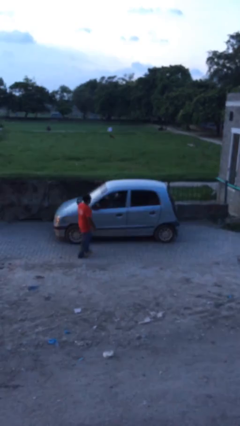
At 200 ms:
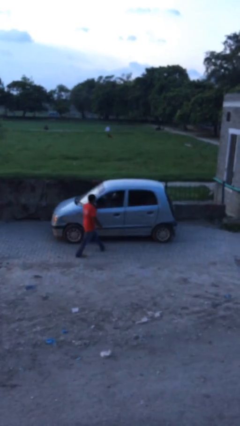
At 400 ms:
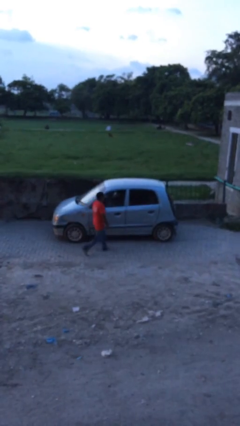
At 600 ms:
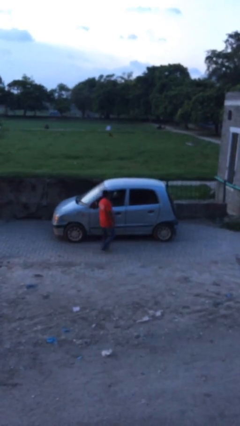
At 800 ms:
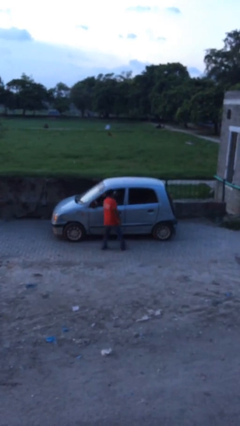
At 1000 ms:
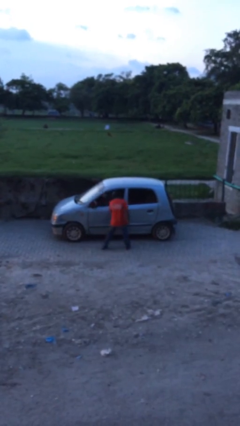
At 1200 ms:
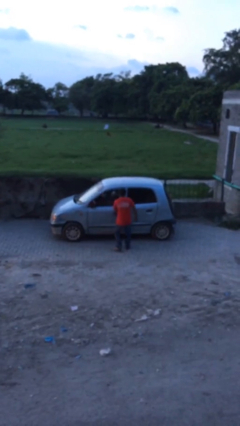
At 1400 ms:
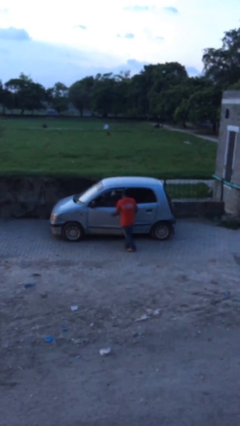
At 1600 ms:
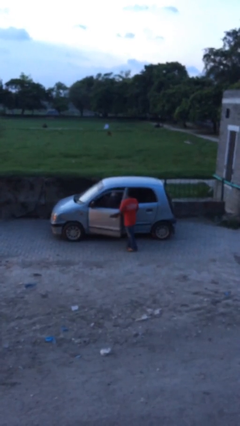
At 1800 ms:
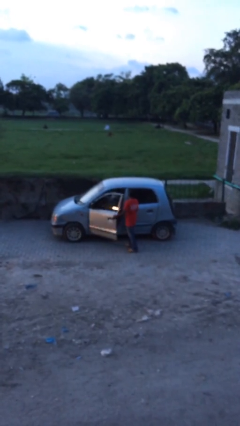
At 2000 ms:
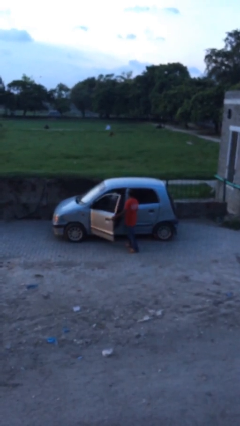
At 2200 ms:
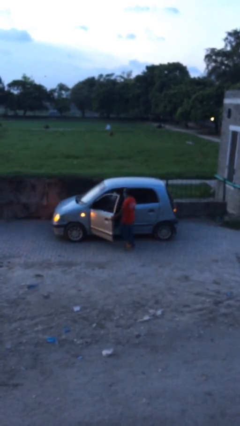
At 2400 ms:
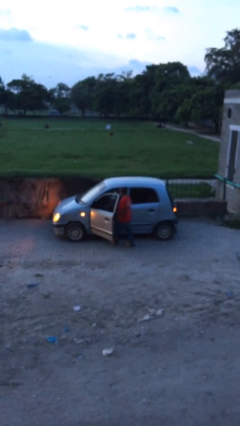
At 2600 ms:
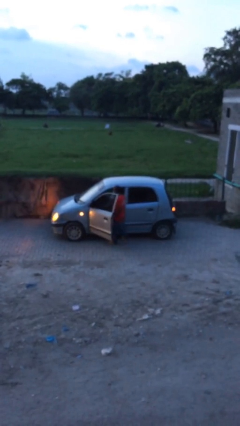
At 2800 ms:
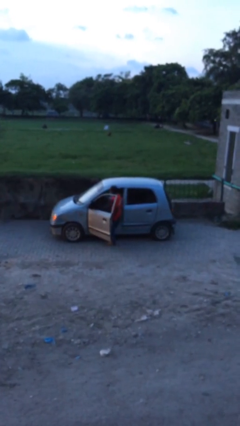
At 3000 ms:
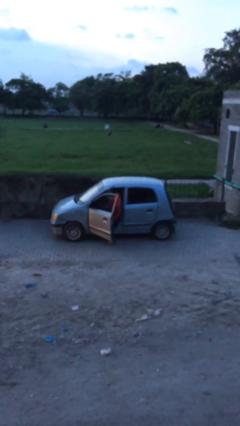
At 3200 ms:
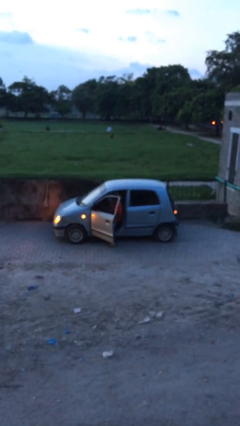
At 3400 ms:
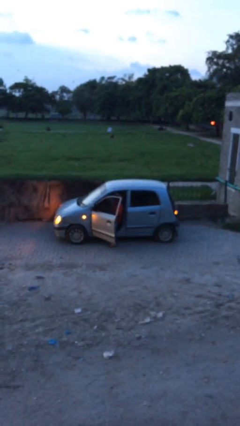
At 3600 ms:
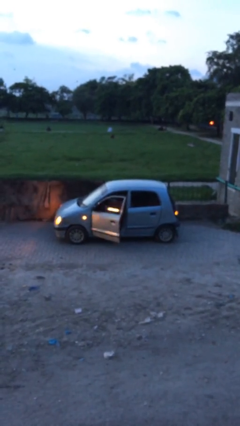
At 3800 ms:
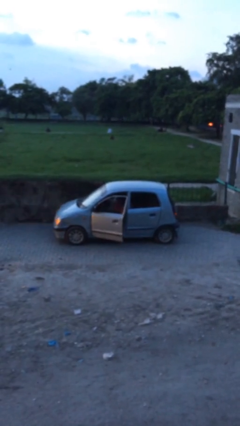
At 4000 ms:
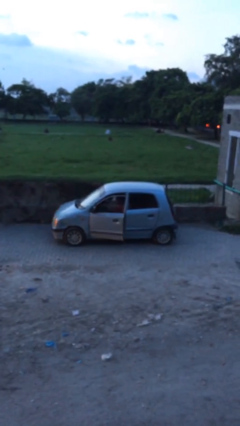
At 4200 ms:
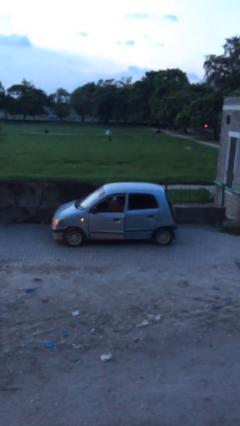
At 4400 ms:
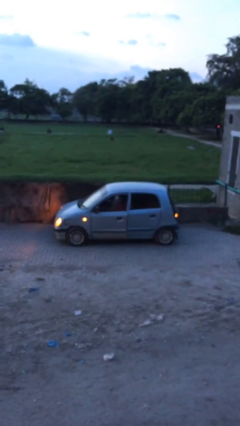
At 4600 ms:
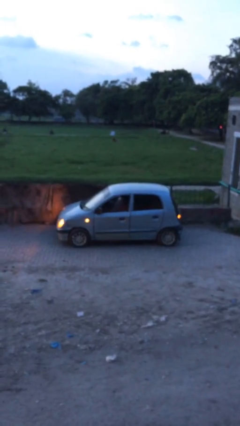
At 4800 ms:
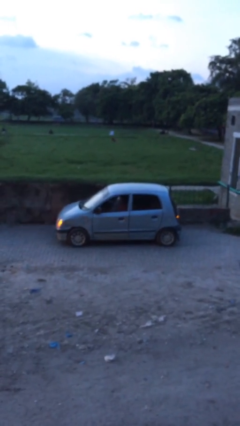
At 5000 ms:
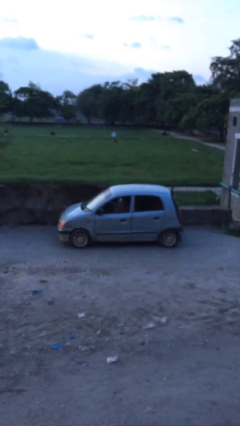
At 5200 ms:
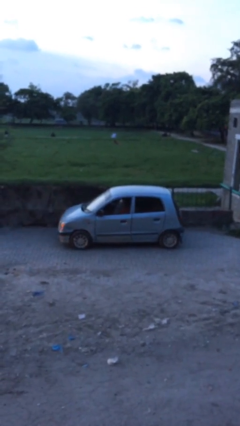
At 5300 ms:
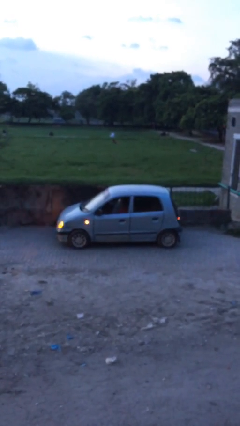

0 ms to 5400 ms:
car picks up person

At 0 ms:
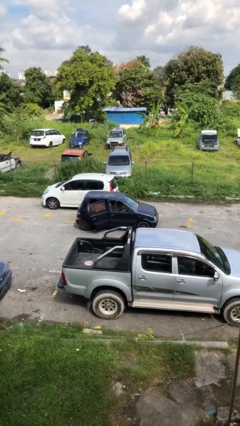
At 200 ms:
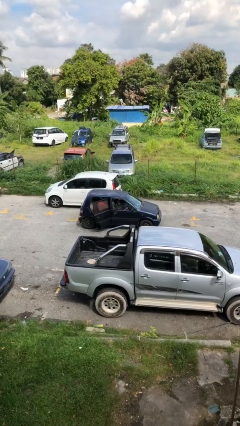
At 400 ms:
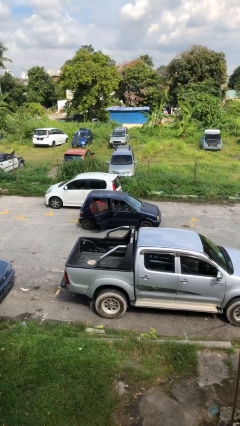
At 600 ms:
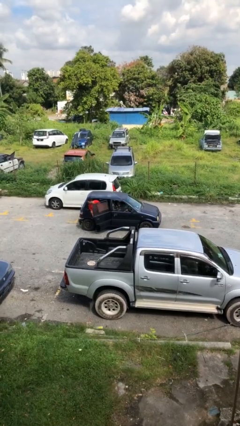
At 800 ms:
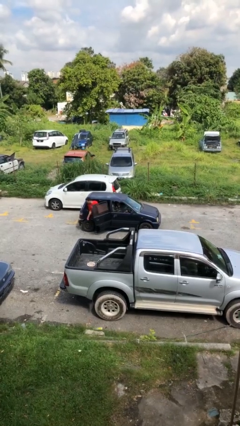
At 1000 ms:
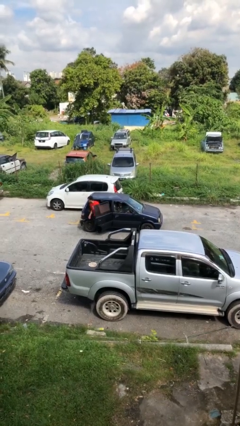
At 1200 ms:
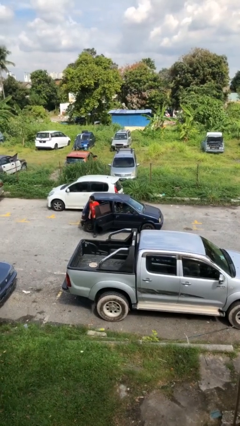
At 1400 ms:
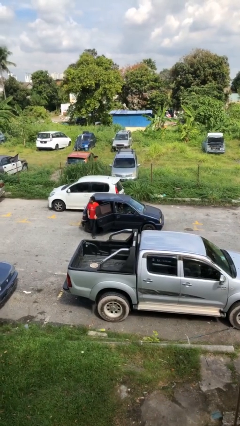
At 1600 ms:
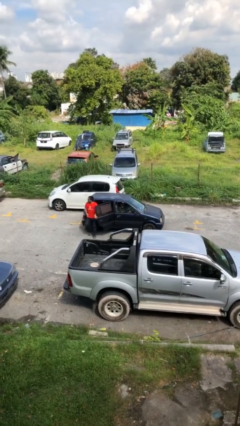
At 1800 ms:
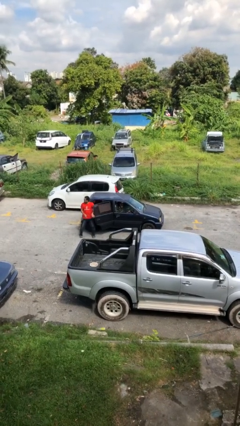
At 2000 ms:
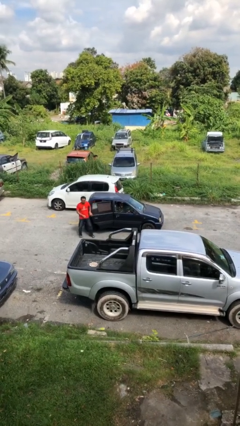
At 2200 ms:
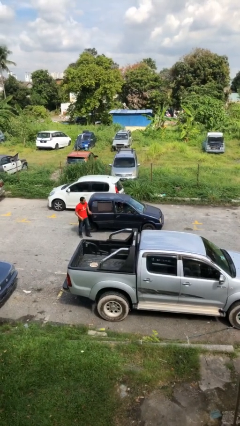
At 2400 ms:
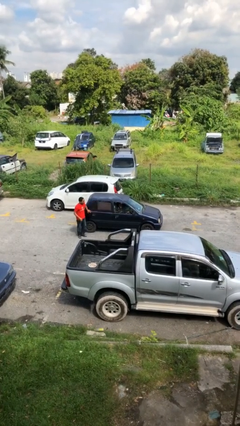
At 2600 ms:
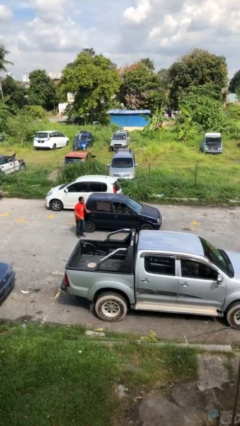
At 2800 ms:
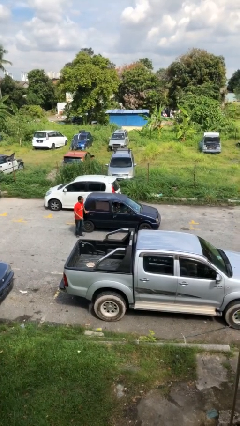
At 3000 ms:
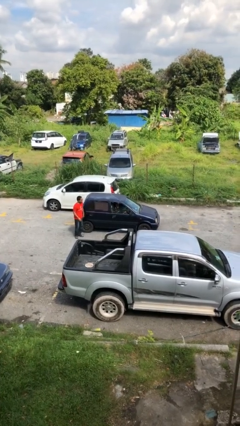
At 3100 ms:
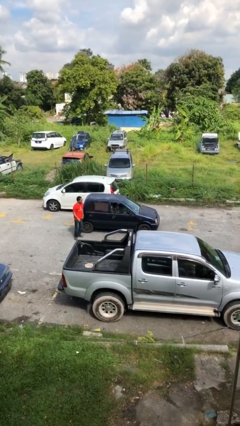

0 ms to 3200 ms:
car drops off person

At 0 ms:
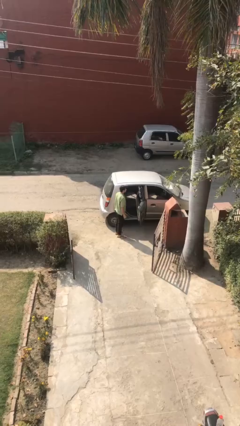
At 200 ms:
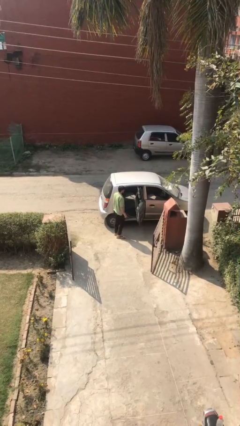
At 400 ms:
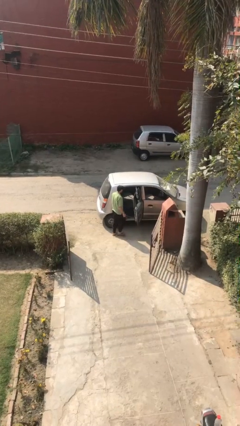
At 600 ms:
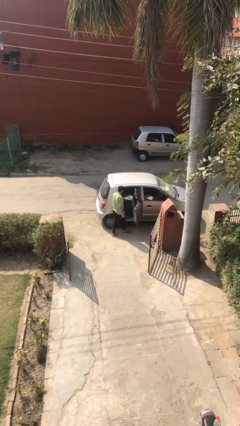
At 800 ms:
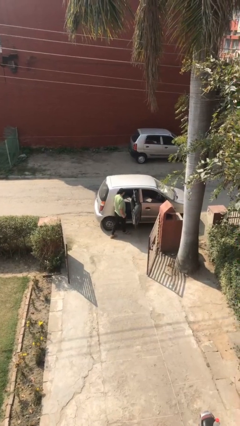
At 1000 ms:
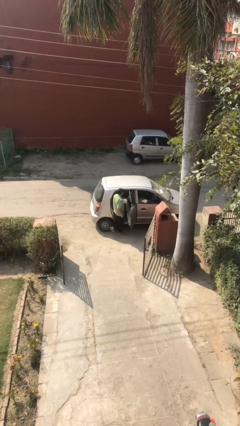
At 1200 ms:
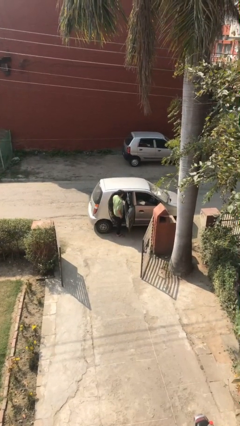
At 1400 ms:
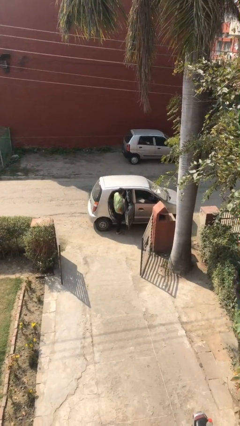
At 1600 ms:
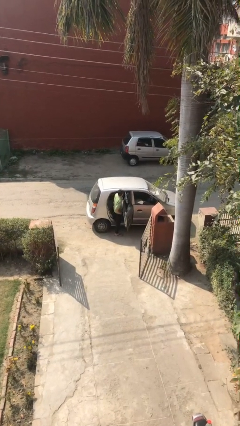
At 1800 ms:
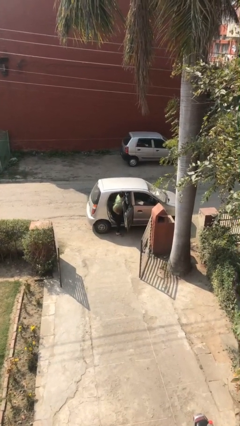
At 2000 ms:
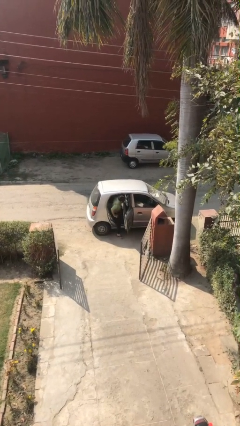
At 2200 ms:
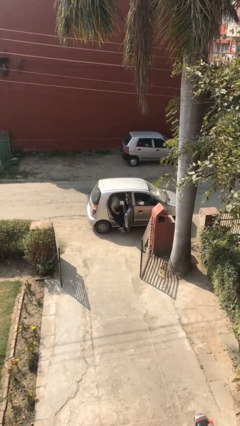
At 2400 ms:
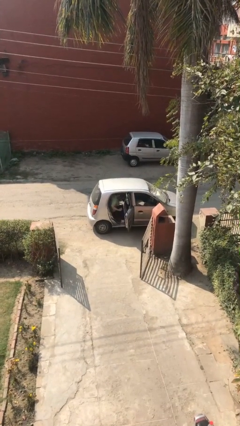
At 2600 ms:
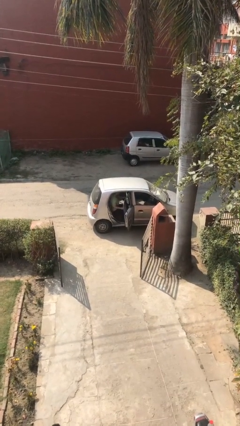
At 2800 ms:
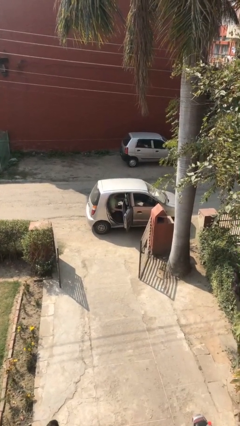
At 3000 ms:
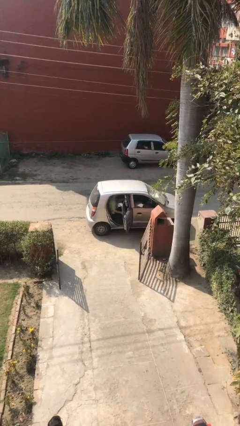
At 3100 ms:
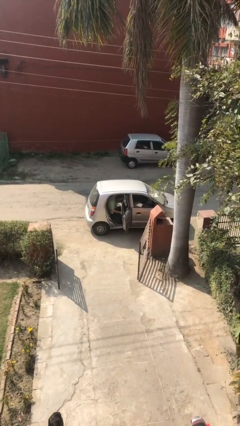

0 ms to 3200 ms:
person enters car

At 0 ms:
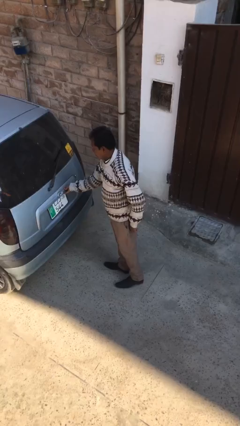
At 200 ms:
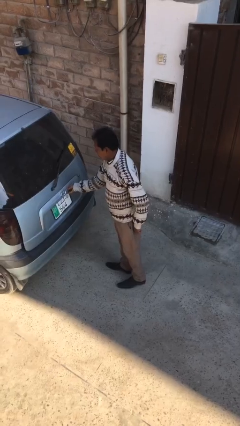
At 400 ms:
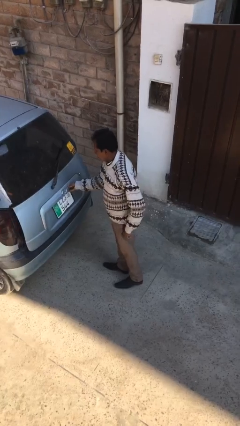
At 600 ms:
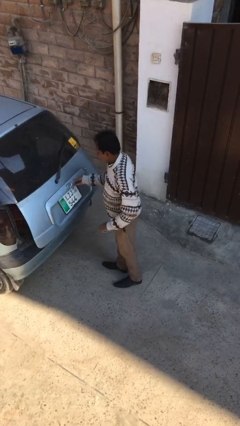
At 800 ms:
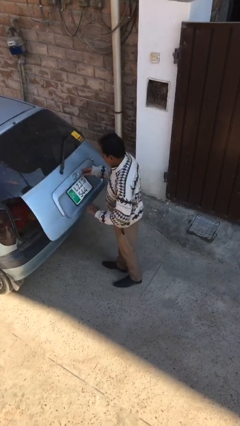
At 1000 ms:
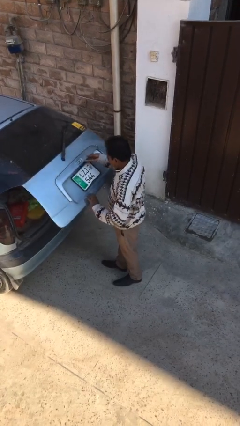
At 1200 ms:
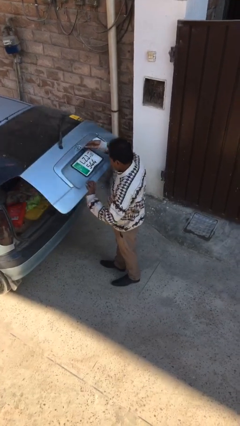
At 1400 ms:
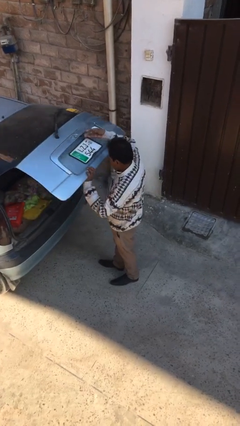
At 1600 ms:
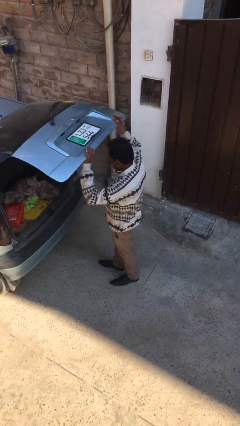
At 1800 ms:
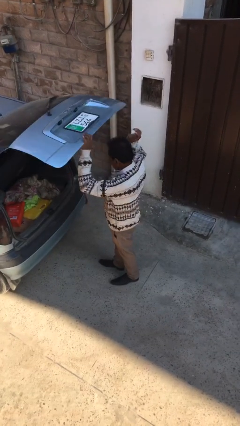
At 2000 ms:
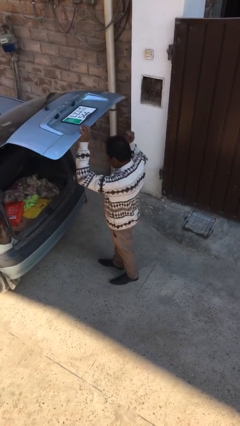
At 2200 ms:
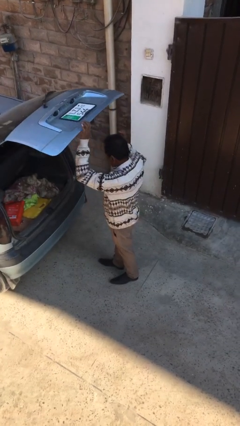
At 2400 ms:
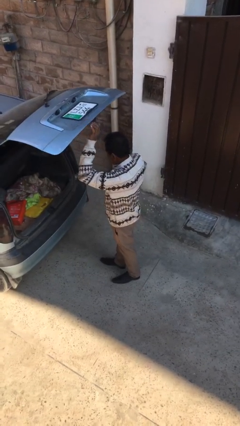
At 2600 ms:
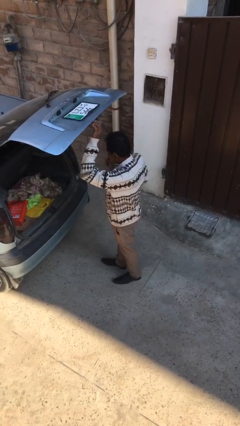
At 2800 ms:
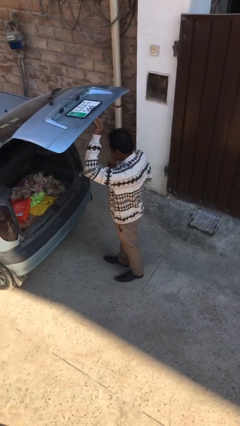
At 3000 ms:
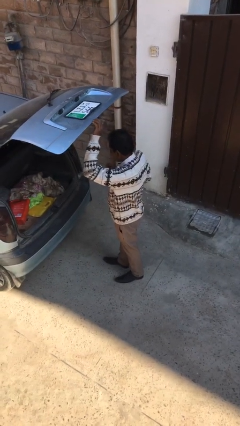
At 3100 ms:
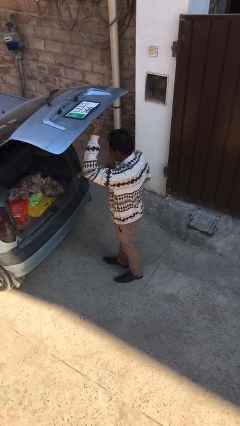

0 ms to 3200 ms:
person opens car trunk

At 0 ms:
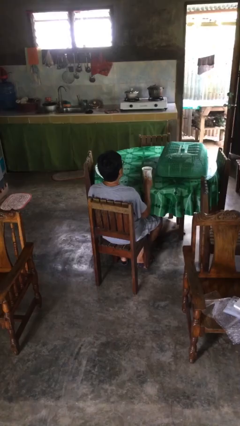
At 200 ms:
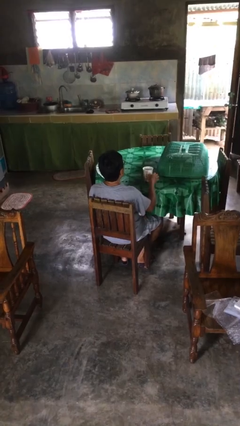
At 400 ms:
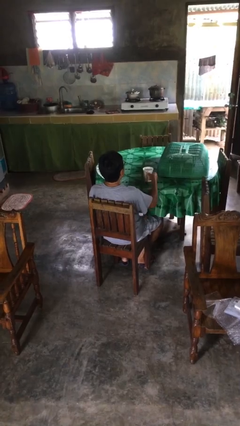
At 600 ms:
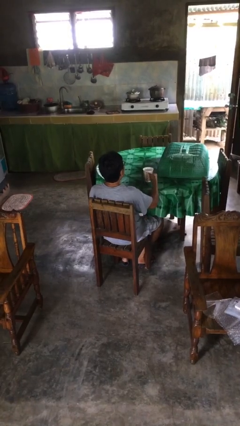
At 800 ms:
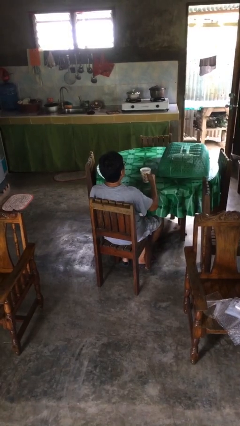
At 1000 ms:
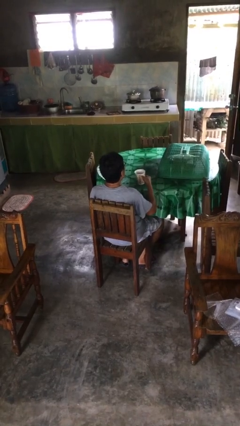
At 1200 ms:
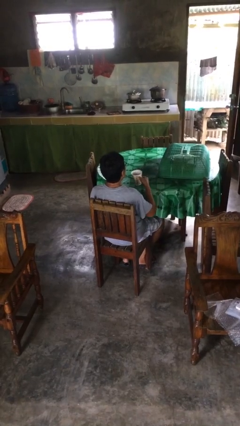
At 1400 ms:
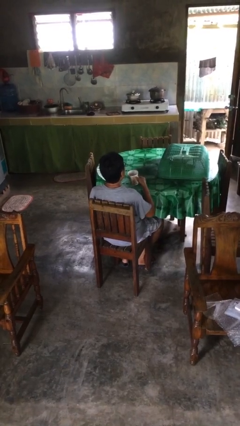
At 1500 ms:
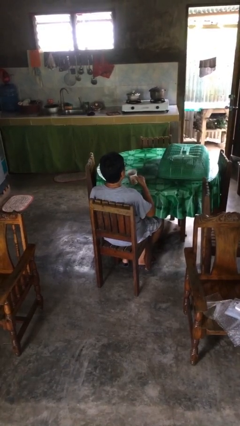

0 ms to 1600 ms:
person picks up object from table

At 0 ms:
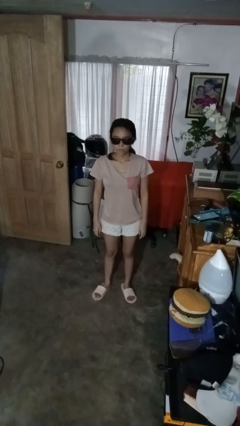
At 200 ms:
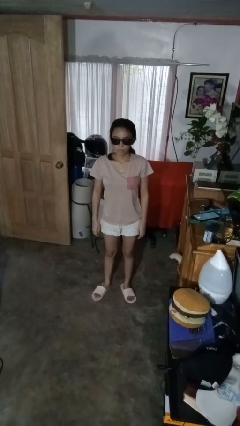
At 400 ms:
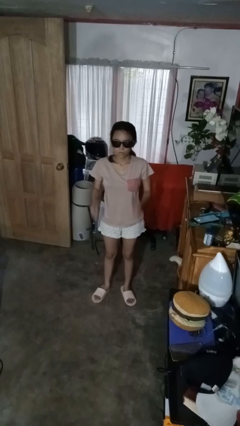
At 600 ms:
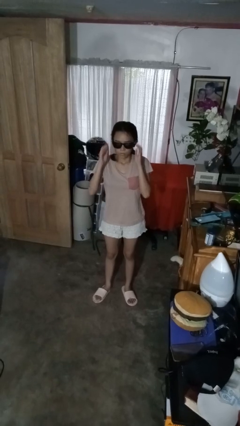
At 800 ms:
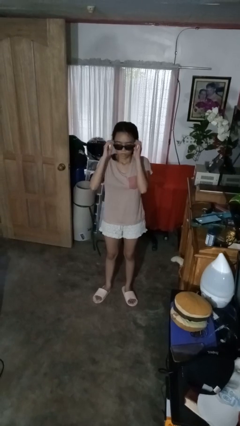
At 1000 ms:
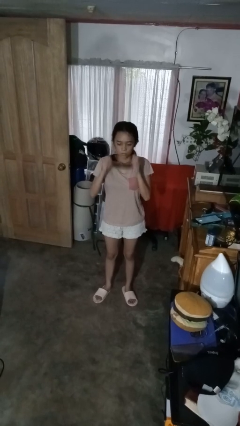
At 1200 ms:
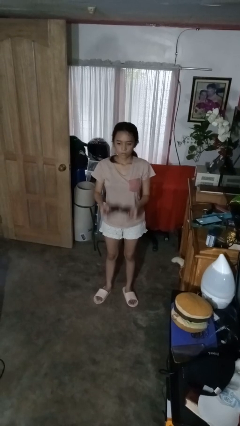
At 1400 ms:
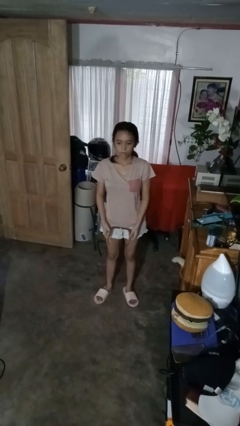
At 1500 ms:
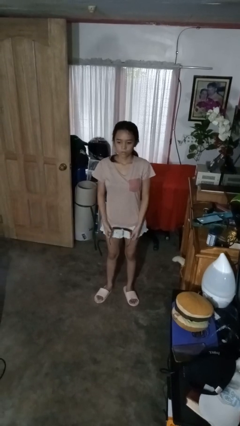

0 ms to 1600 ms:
person takes off sunglasses
